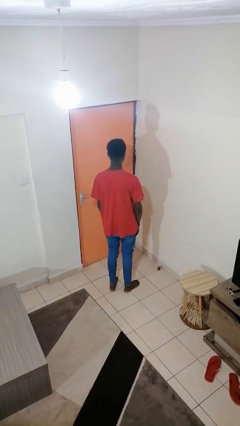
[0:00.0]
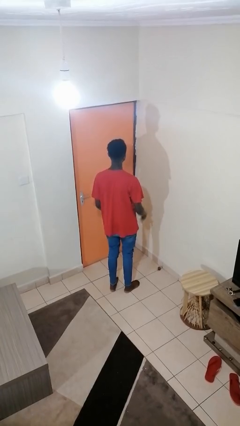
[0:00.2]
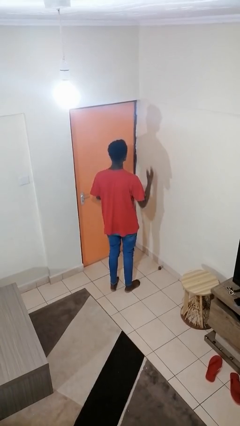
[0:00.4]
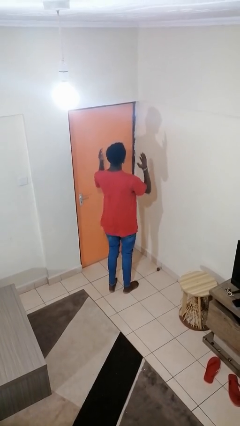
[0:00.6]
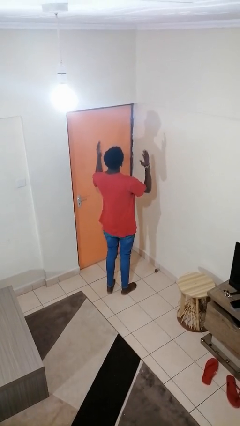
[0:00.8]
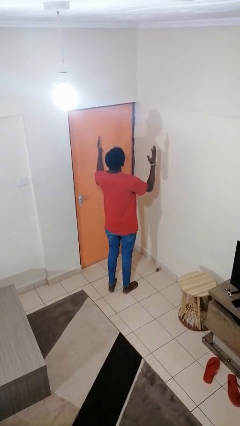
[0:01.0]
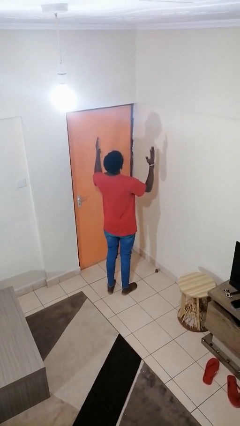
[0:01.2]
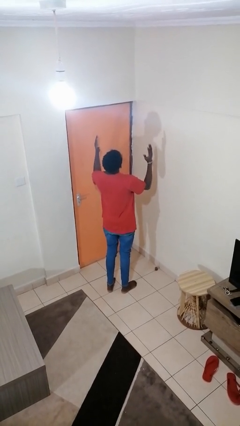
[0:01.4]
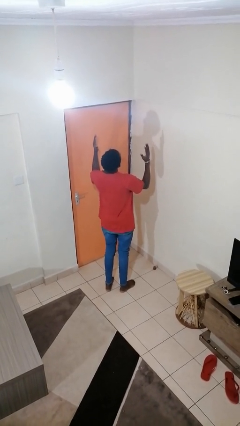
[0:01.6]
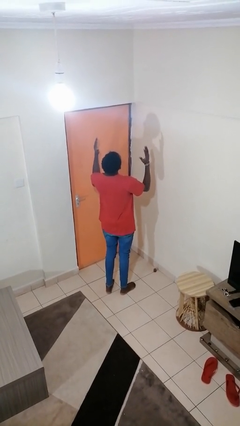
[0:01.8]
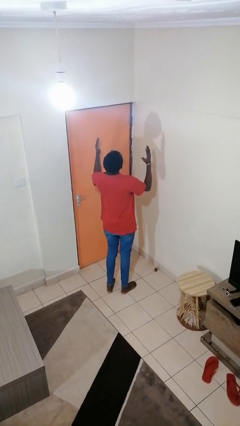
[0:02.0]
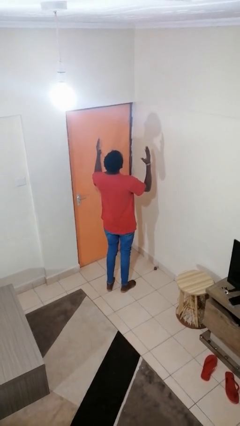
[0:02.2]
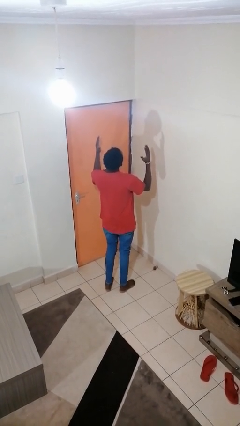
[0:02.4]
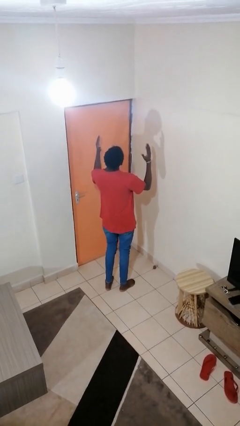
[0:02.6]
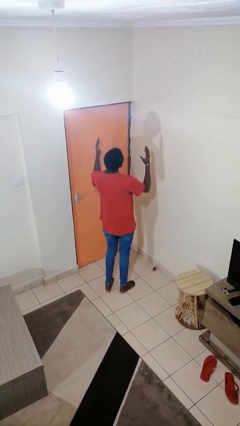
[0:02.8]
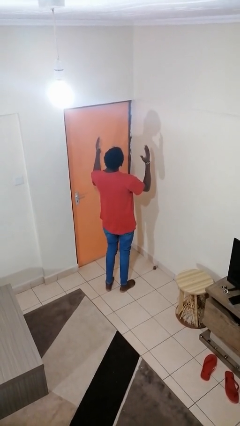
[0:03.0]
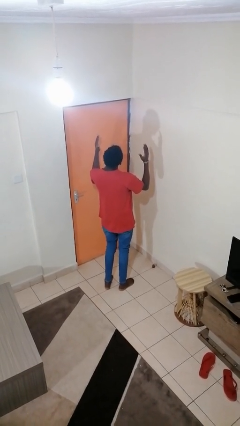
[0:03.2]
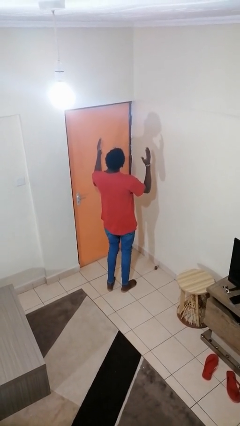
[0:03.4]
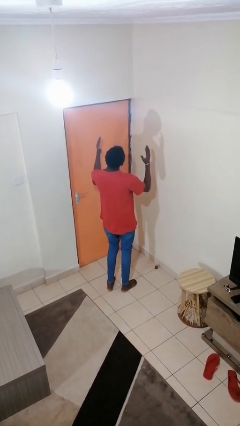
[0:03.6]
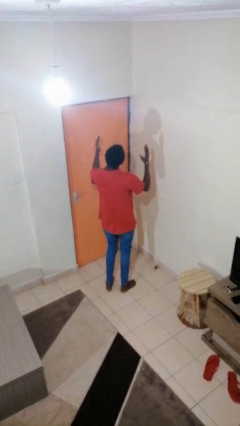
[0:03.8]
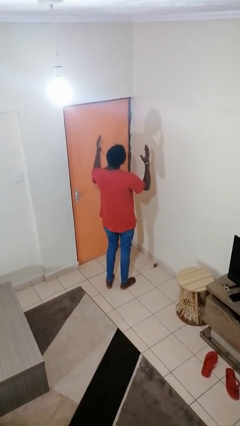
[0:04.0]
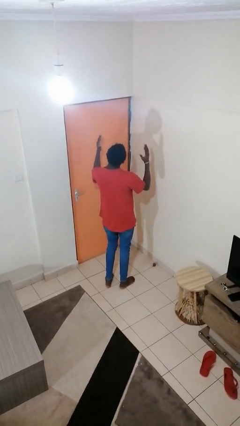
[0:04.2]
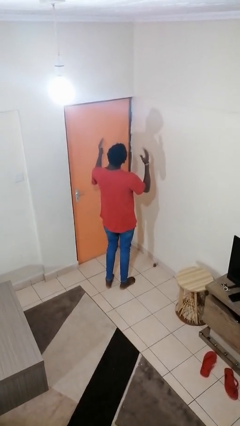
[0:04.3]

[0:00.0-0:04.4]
person prays

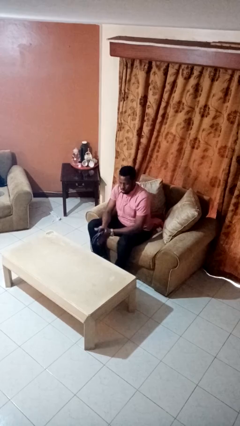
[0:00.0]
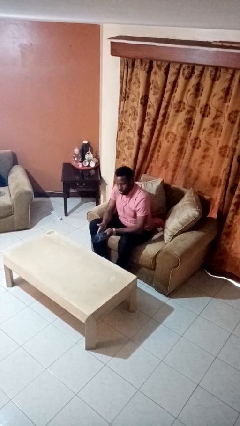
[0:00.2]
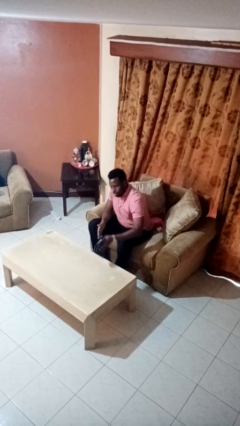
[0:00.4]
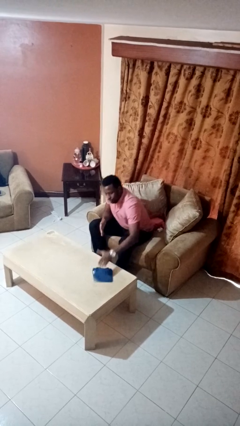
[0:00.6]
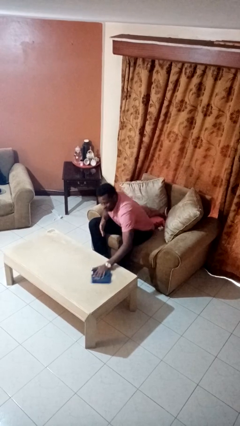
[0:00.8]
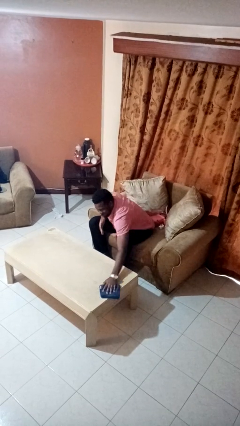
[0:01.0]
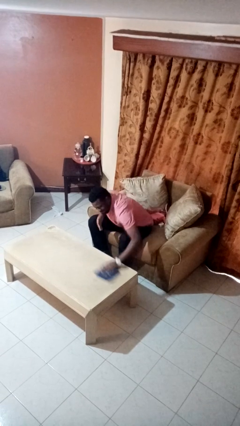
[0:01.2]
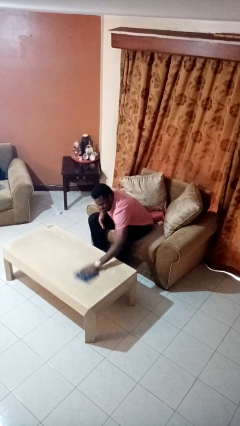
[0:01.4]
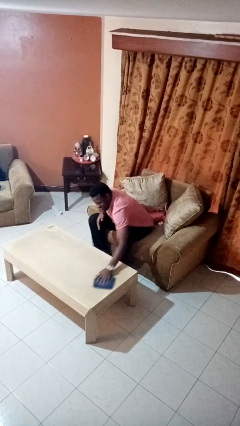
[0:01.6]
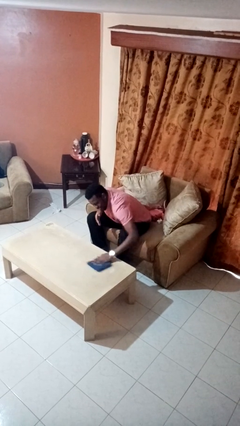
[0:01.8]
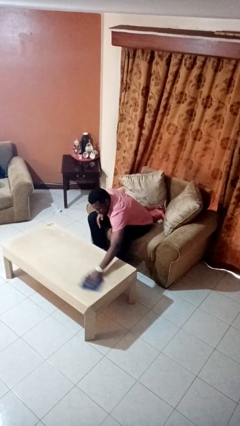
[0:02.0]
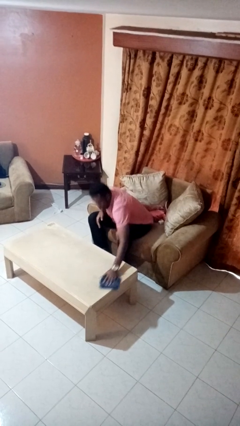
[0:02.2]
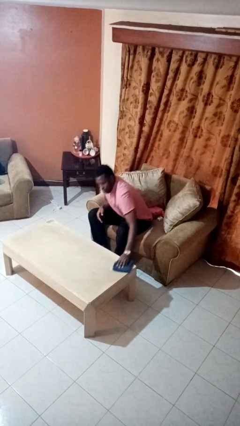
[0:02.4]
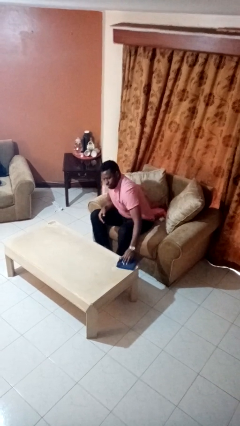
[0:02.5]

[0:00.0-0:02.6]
person cleans table with rag

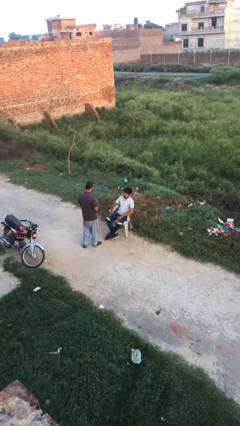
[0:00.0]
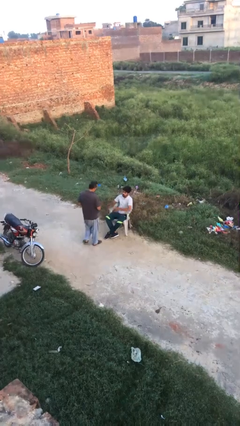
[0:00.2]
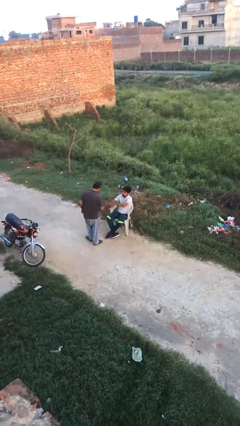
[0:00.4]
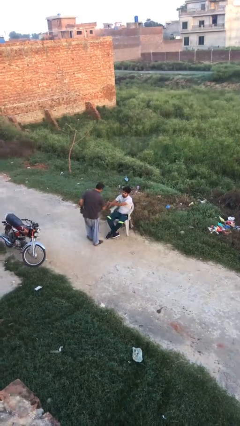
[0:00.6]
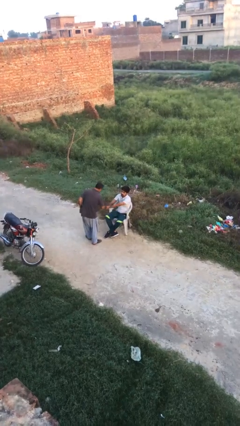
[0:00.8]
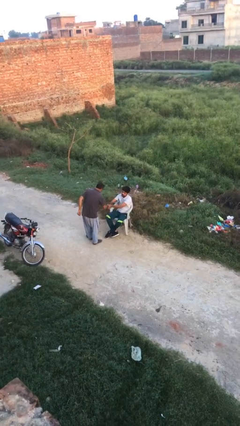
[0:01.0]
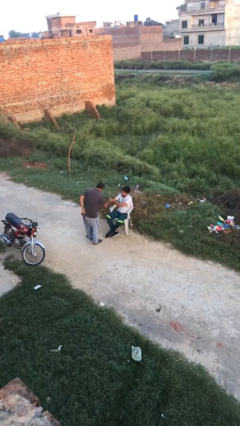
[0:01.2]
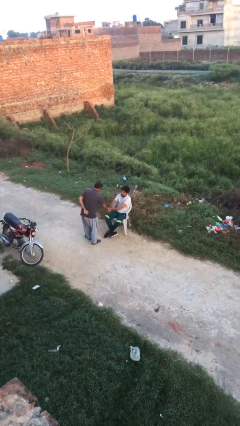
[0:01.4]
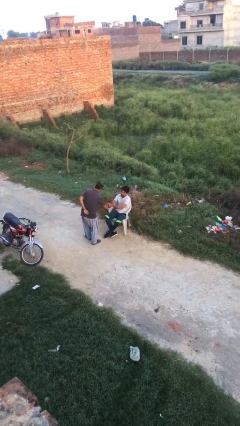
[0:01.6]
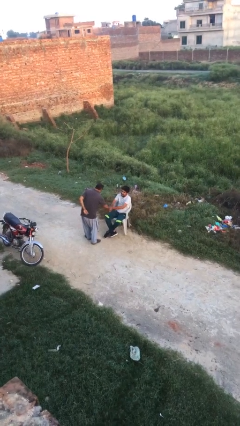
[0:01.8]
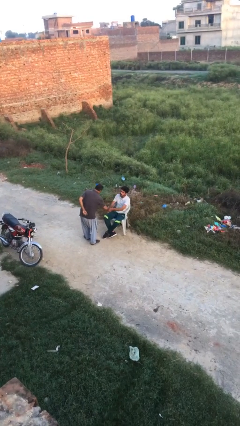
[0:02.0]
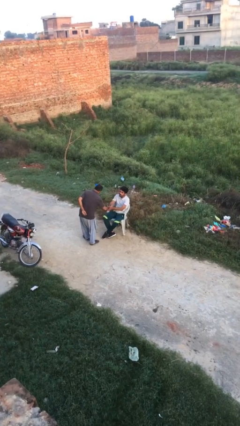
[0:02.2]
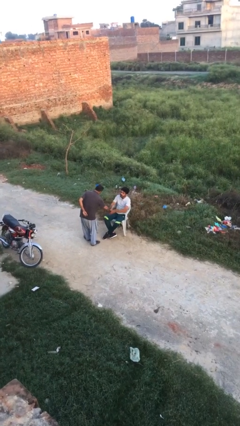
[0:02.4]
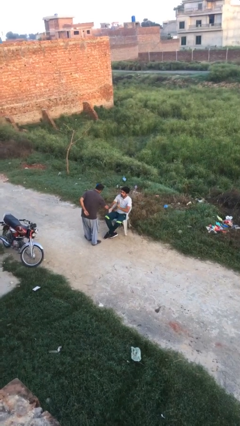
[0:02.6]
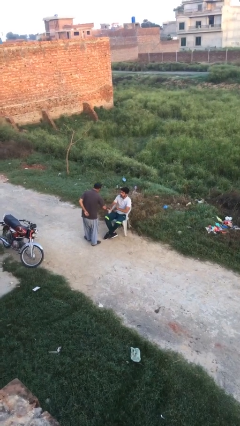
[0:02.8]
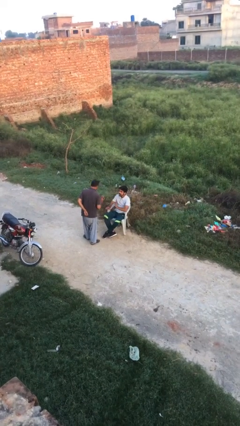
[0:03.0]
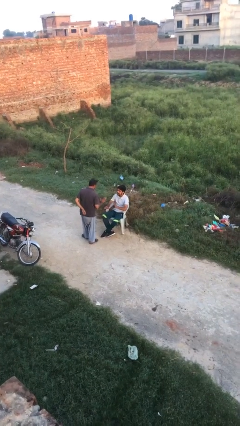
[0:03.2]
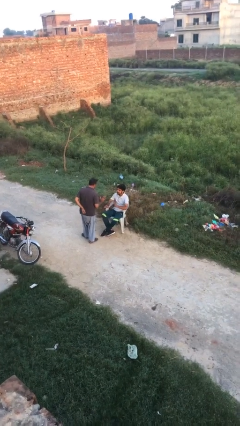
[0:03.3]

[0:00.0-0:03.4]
person shakes hand

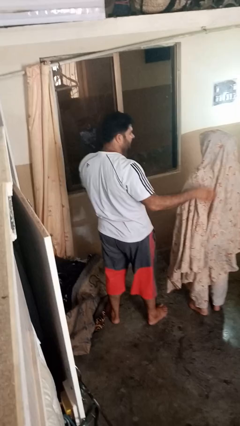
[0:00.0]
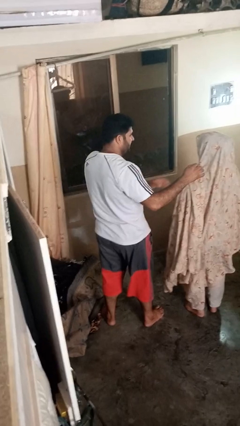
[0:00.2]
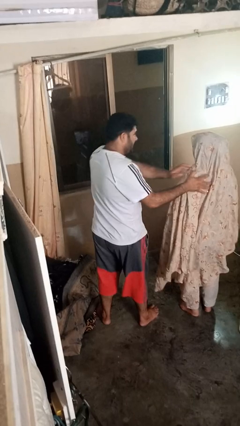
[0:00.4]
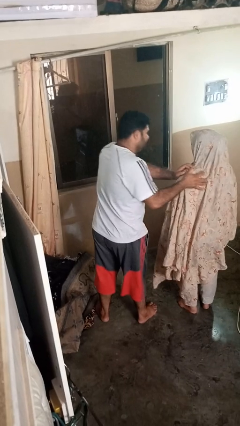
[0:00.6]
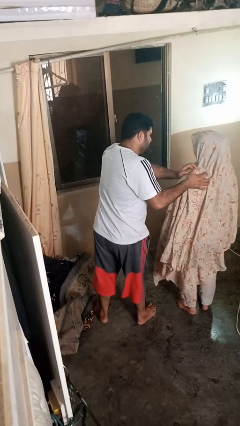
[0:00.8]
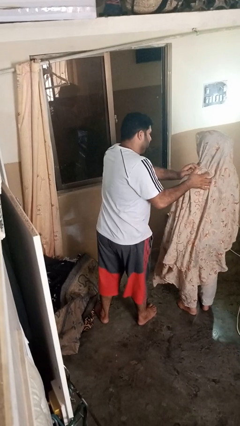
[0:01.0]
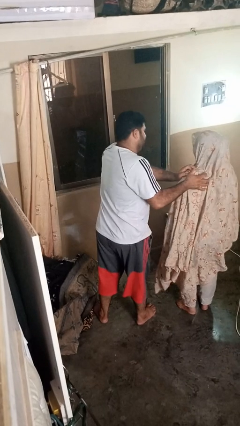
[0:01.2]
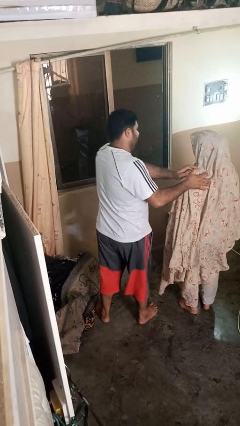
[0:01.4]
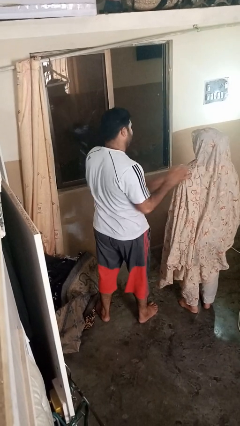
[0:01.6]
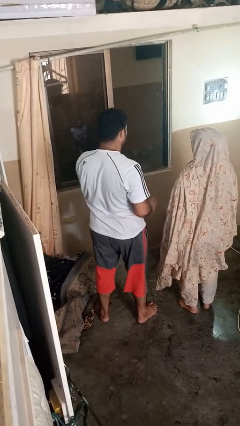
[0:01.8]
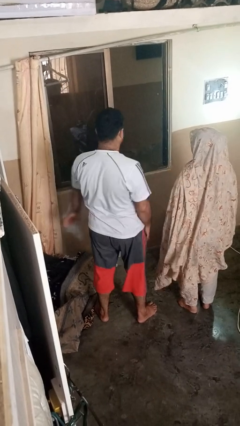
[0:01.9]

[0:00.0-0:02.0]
person shoves person

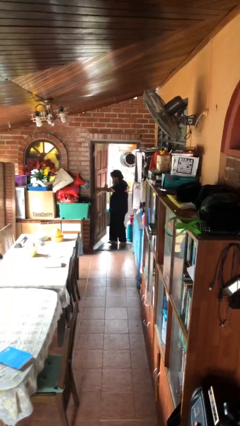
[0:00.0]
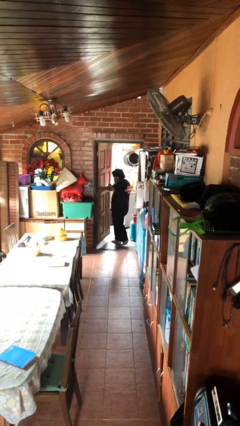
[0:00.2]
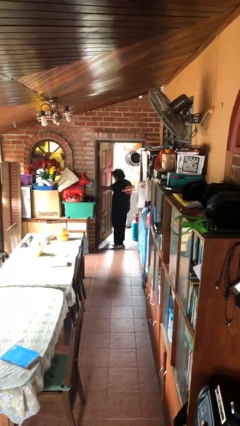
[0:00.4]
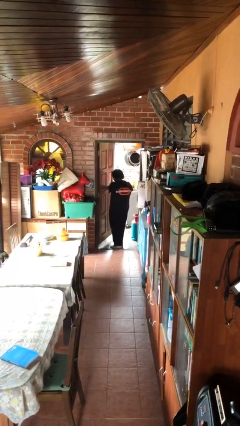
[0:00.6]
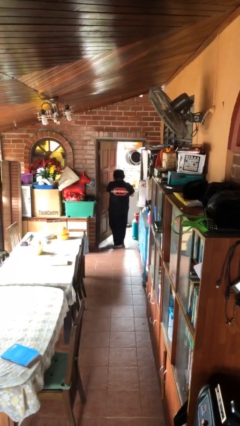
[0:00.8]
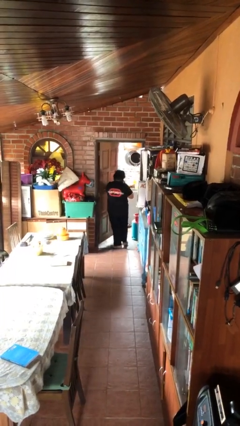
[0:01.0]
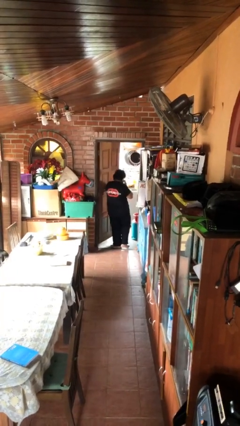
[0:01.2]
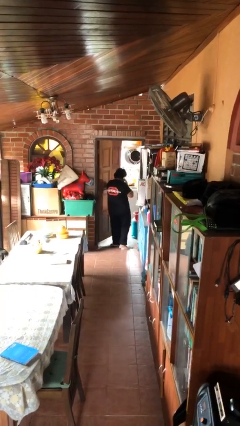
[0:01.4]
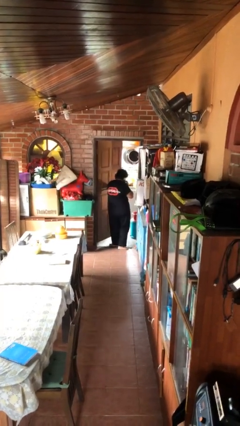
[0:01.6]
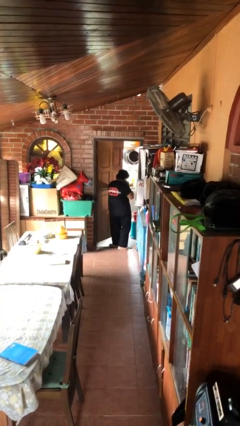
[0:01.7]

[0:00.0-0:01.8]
person enters scene through structure

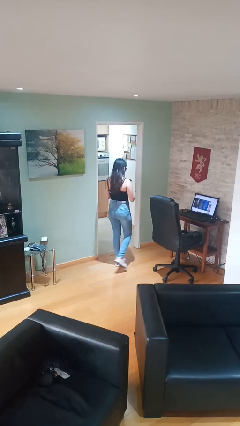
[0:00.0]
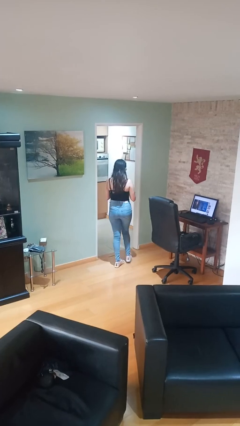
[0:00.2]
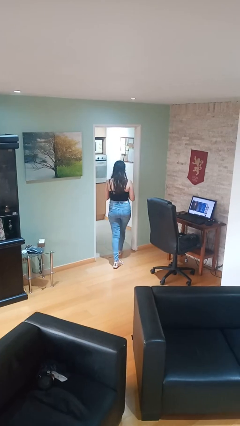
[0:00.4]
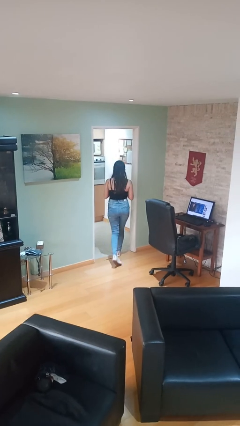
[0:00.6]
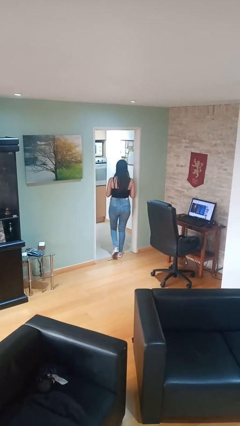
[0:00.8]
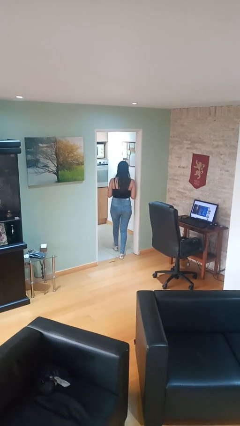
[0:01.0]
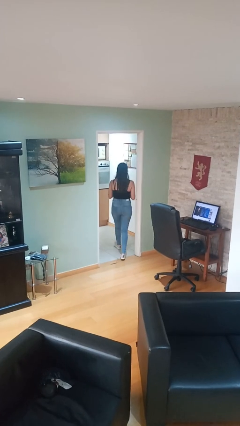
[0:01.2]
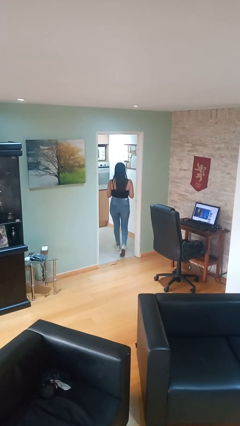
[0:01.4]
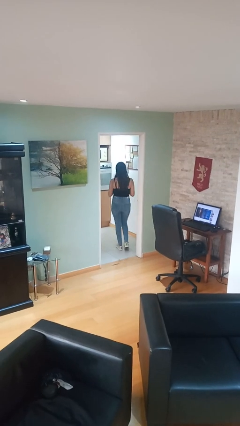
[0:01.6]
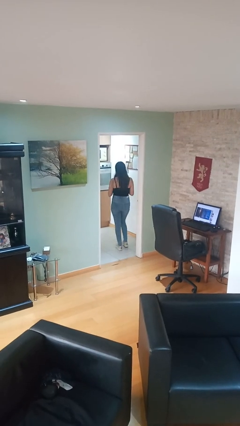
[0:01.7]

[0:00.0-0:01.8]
person exits scene through structure

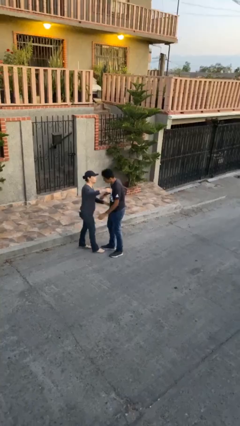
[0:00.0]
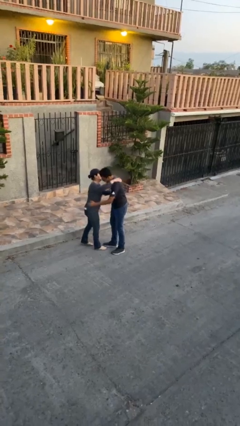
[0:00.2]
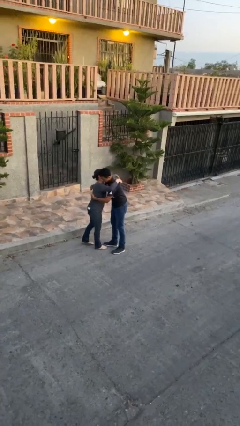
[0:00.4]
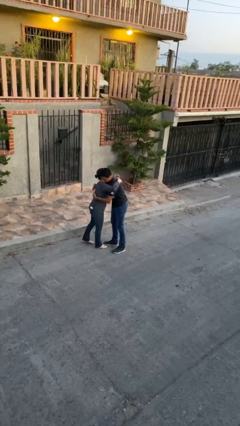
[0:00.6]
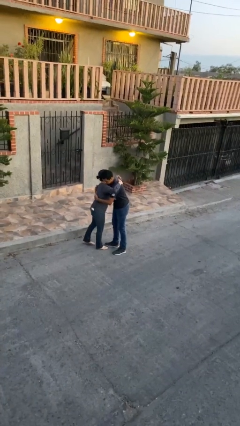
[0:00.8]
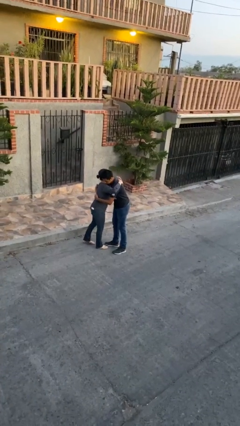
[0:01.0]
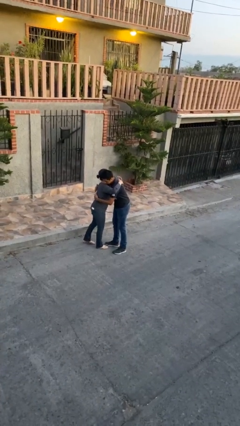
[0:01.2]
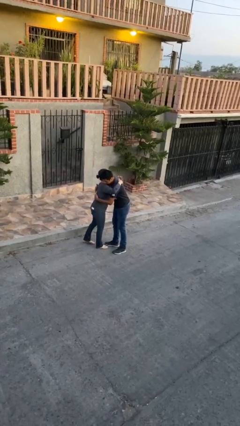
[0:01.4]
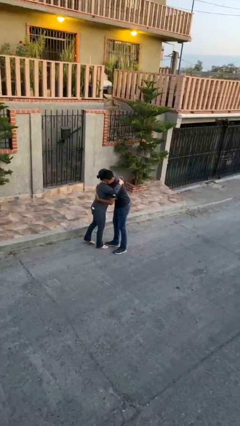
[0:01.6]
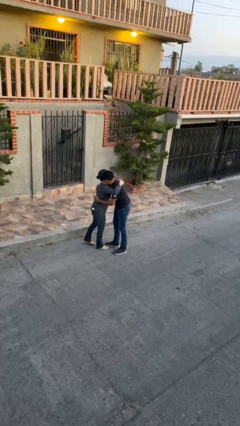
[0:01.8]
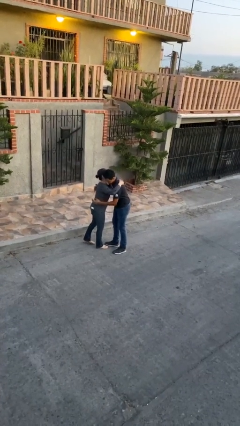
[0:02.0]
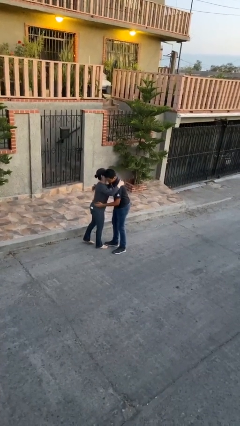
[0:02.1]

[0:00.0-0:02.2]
person embraces person
